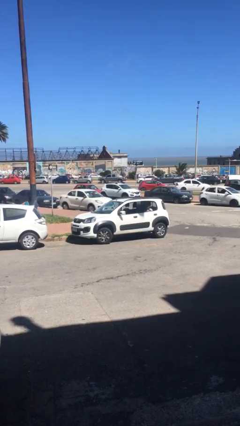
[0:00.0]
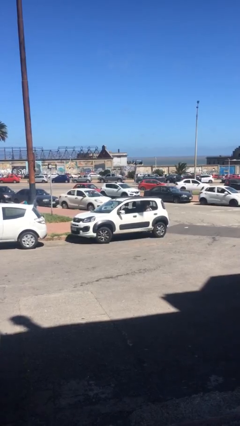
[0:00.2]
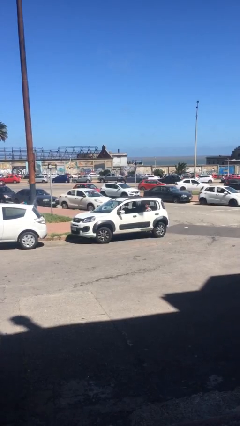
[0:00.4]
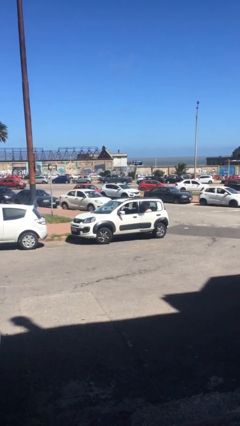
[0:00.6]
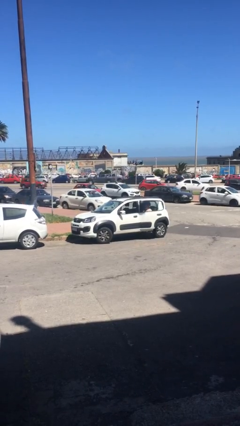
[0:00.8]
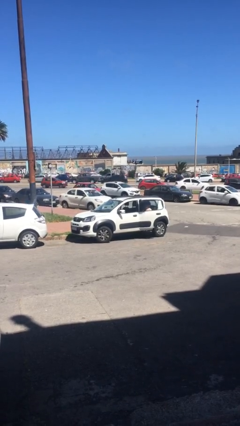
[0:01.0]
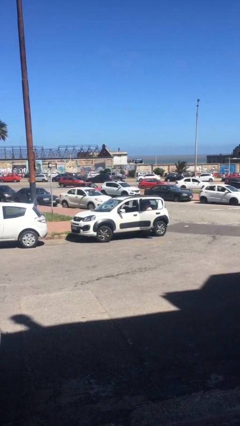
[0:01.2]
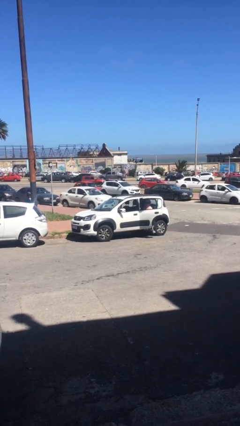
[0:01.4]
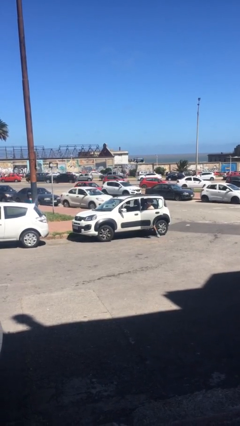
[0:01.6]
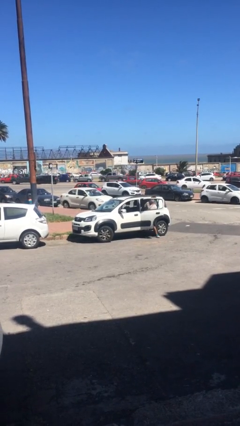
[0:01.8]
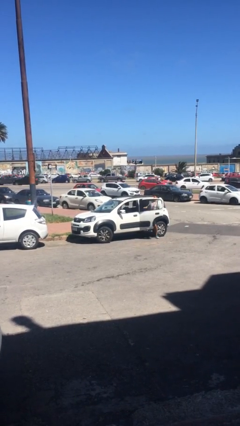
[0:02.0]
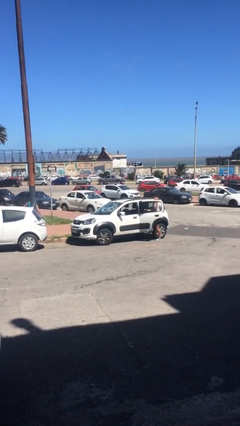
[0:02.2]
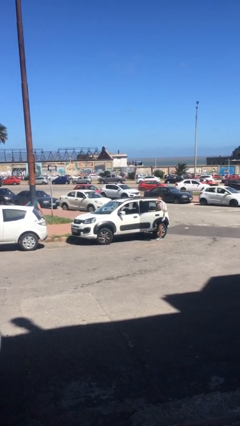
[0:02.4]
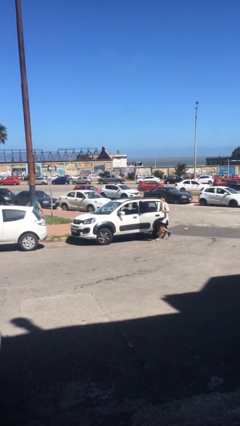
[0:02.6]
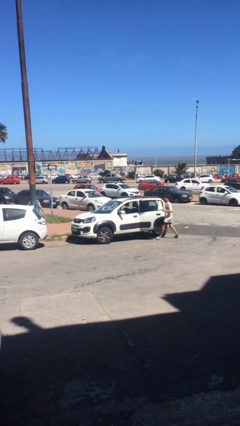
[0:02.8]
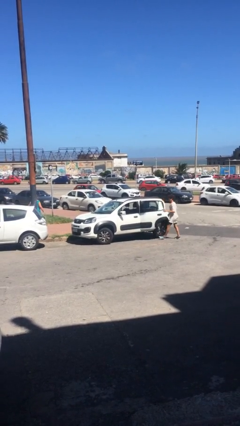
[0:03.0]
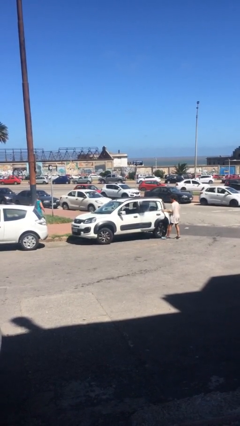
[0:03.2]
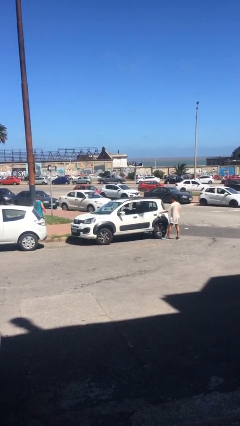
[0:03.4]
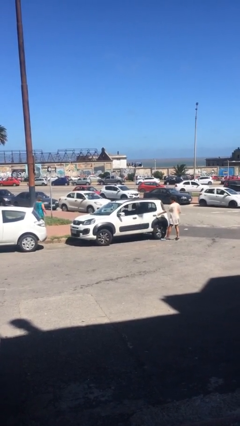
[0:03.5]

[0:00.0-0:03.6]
car drops off person

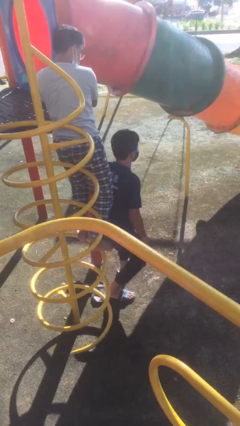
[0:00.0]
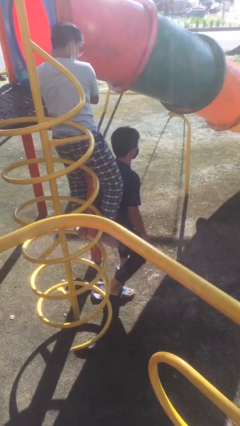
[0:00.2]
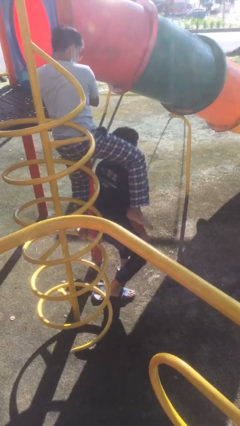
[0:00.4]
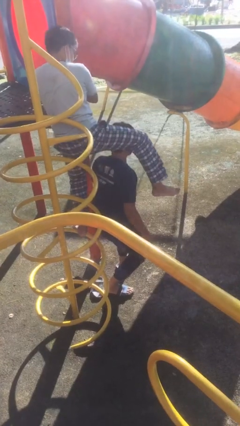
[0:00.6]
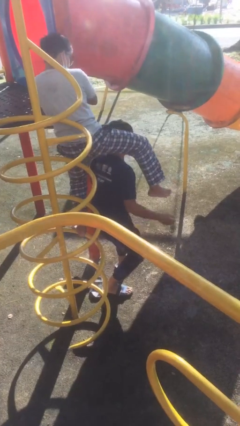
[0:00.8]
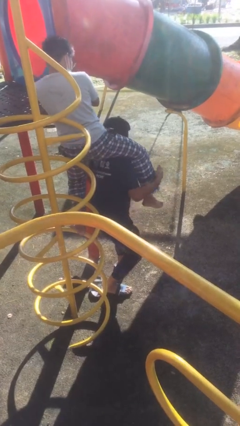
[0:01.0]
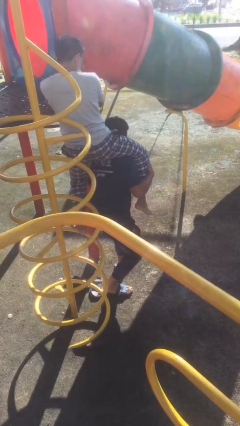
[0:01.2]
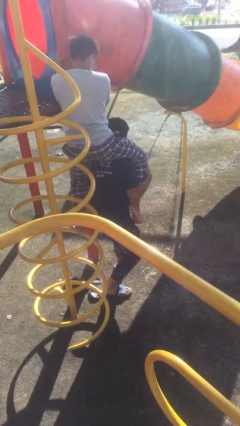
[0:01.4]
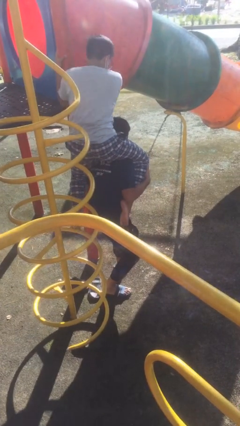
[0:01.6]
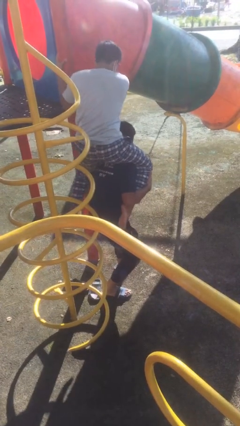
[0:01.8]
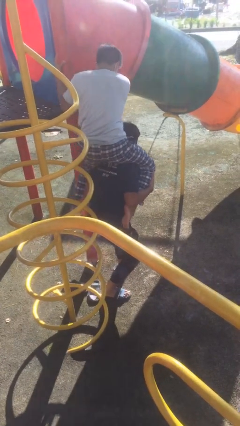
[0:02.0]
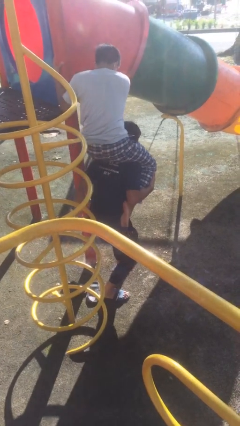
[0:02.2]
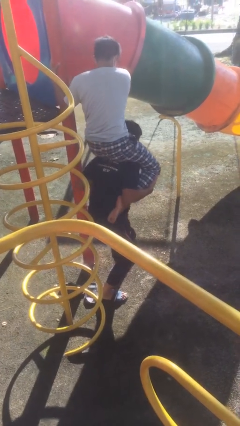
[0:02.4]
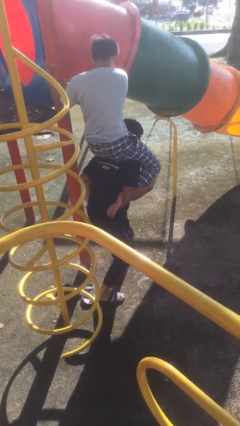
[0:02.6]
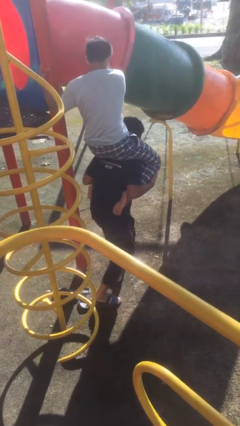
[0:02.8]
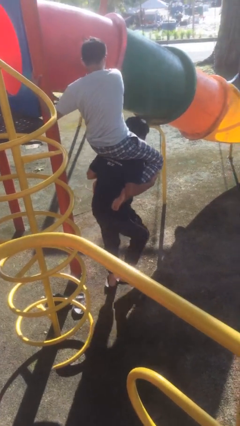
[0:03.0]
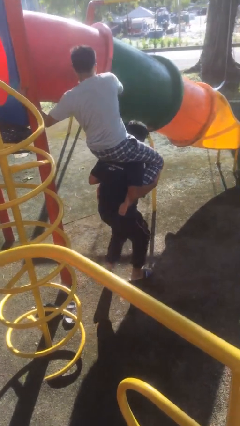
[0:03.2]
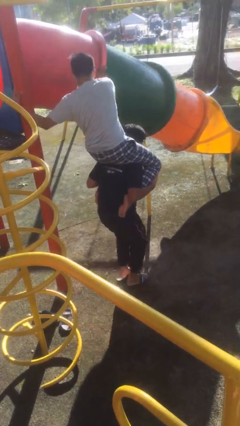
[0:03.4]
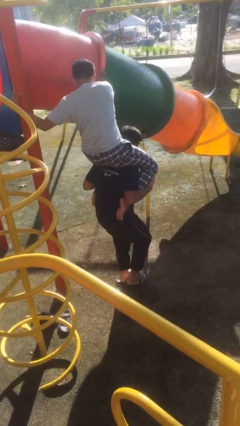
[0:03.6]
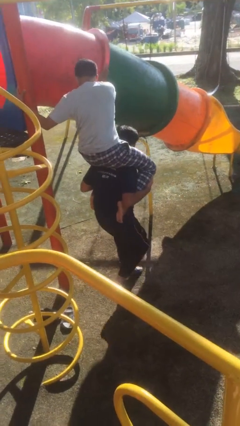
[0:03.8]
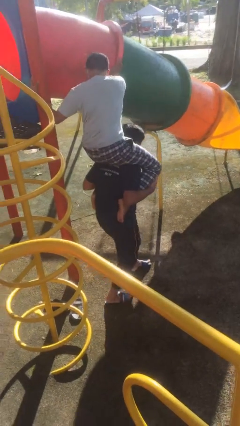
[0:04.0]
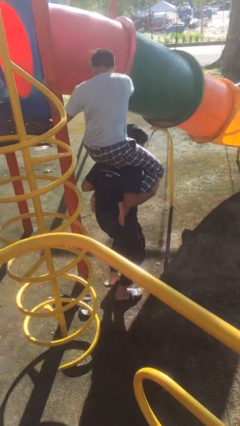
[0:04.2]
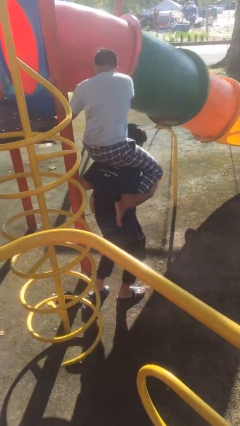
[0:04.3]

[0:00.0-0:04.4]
person carries person on shoulders

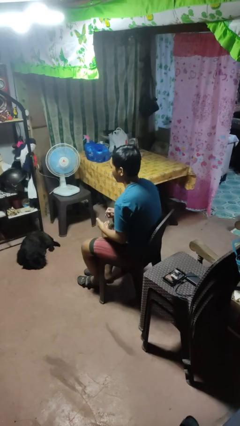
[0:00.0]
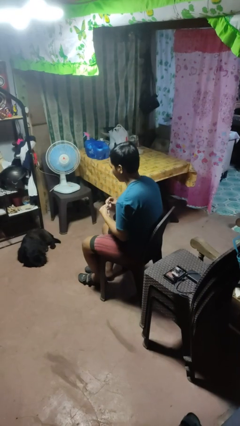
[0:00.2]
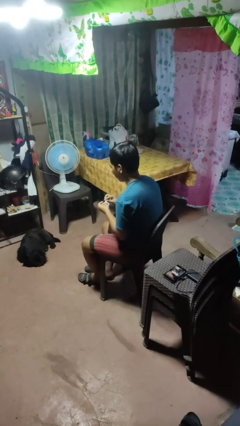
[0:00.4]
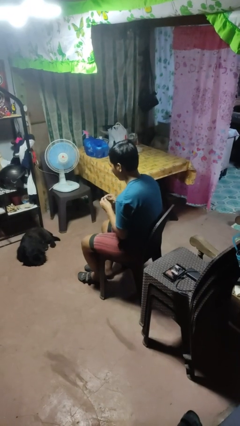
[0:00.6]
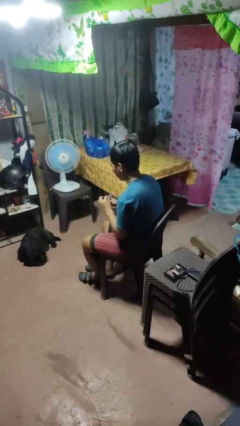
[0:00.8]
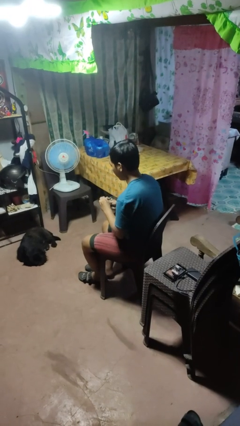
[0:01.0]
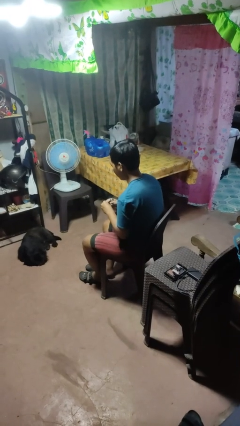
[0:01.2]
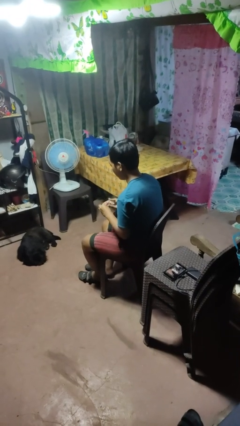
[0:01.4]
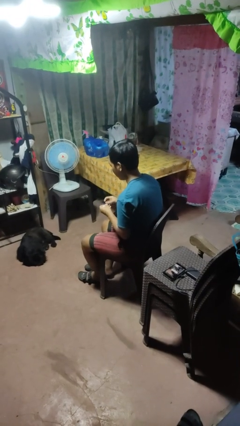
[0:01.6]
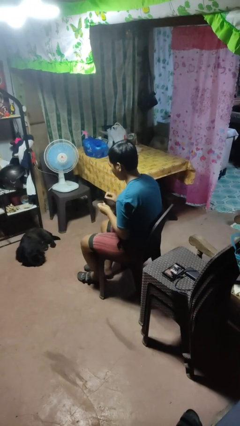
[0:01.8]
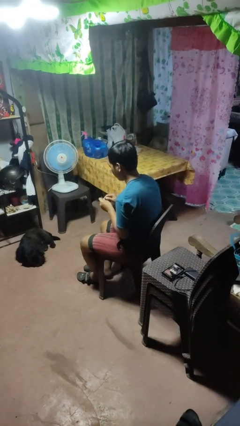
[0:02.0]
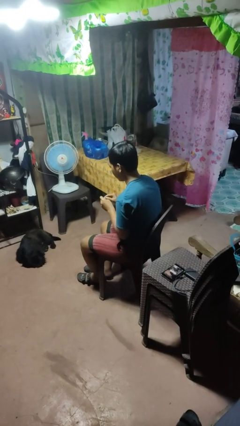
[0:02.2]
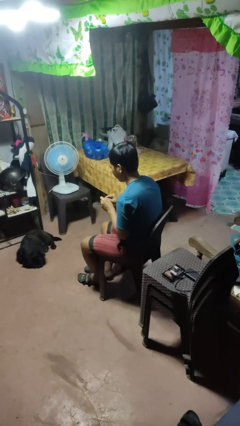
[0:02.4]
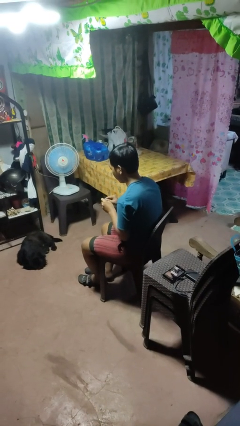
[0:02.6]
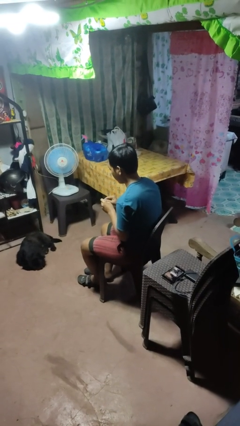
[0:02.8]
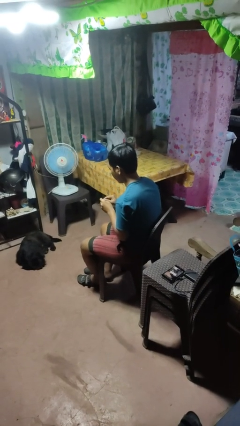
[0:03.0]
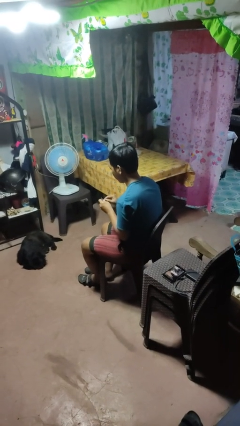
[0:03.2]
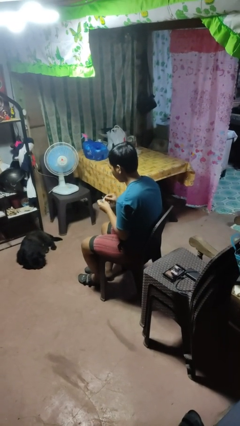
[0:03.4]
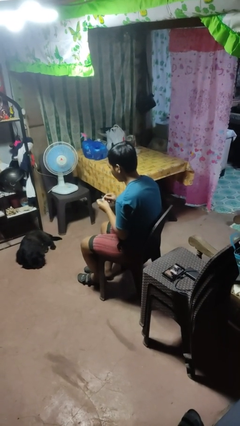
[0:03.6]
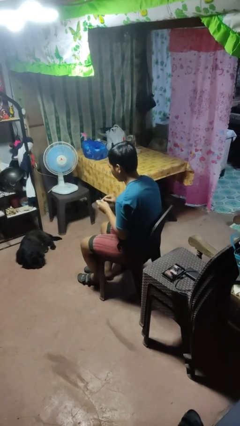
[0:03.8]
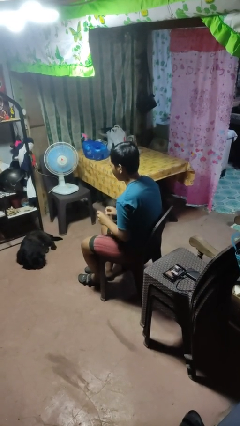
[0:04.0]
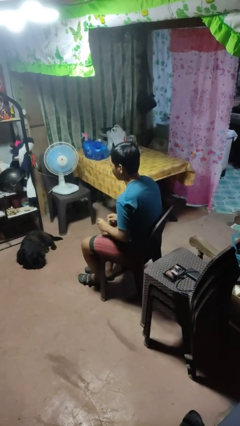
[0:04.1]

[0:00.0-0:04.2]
person files fingernails

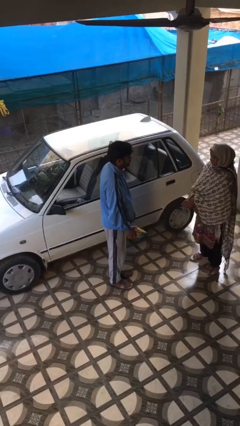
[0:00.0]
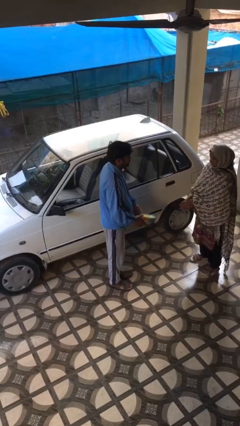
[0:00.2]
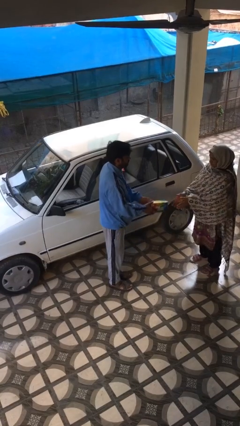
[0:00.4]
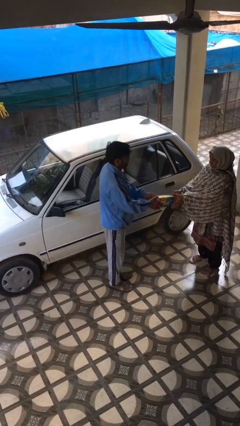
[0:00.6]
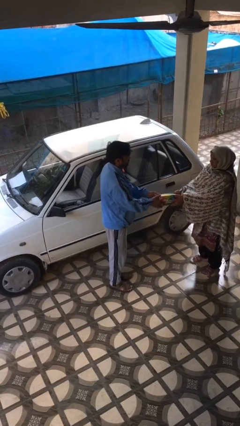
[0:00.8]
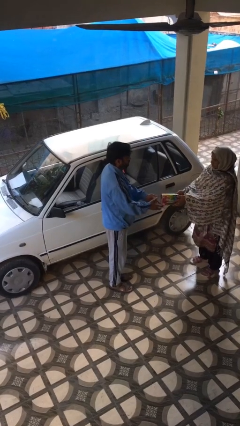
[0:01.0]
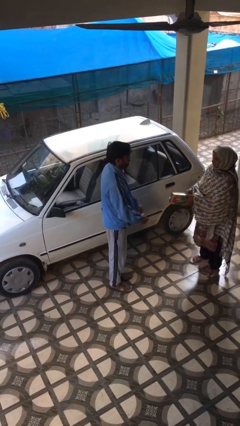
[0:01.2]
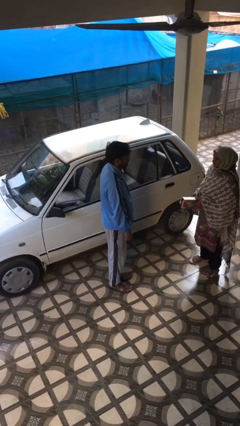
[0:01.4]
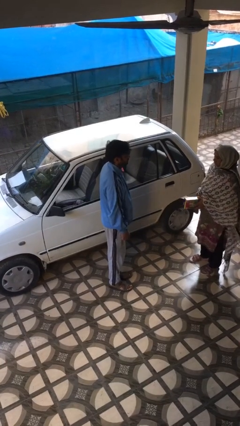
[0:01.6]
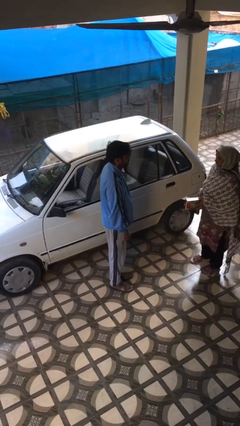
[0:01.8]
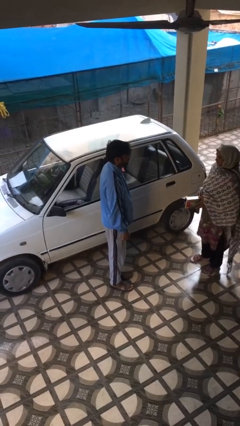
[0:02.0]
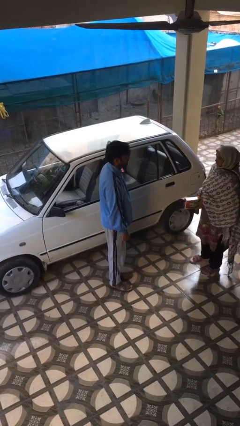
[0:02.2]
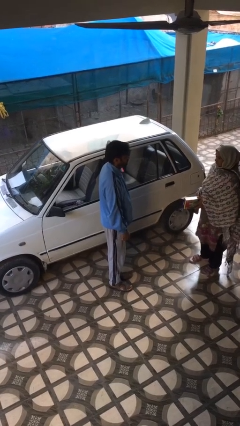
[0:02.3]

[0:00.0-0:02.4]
person transfers object to person

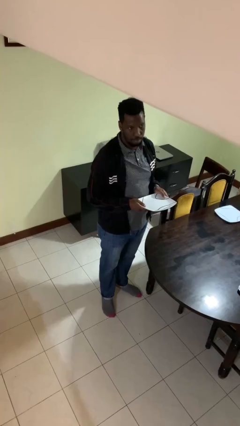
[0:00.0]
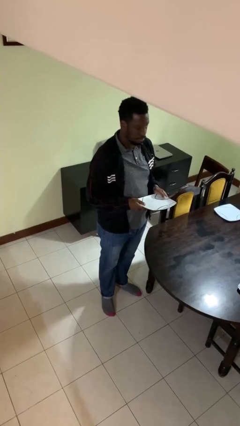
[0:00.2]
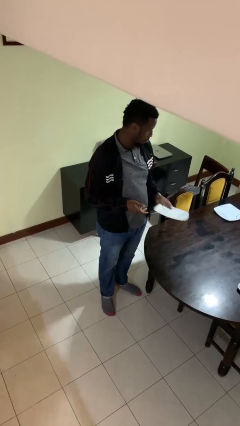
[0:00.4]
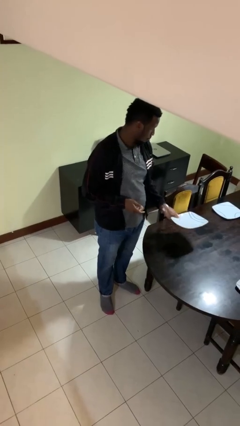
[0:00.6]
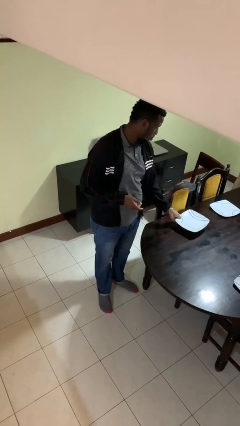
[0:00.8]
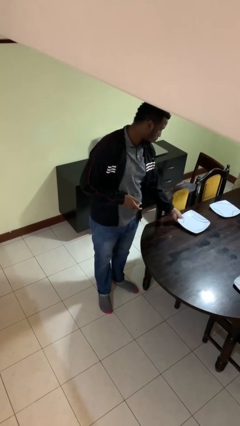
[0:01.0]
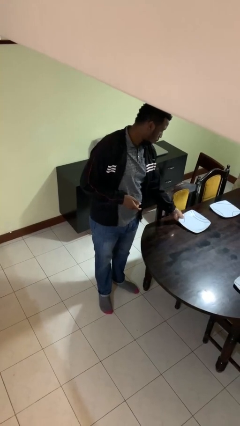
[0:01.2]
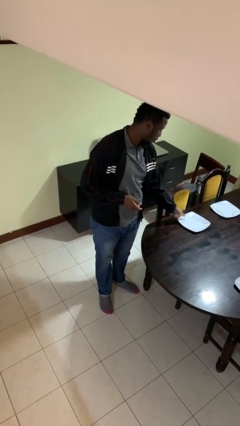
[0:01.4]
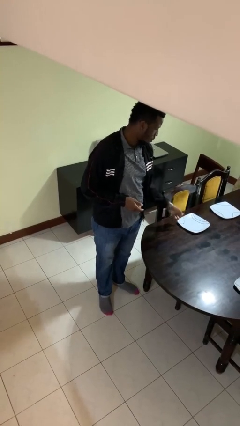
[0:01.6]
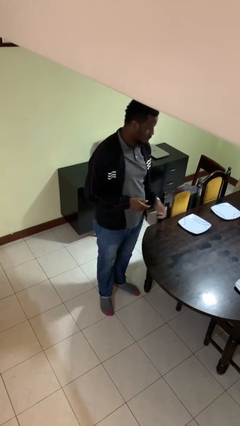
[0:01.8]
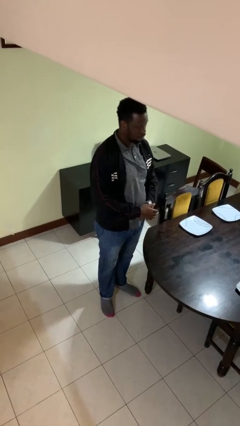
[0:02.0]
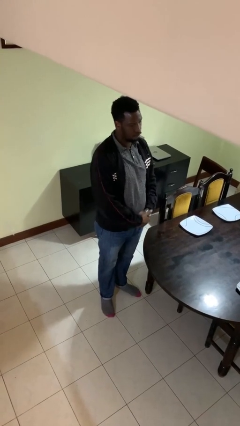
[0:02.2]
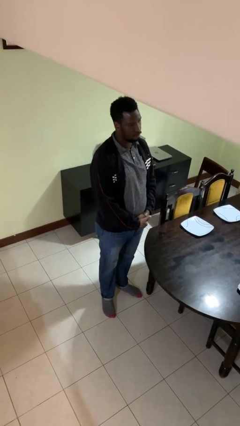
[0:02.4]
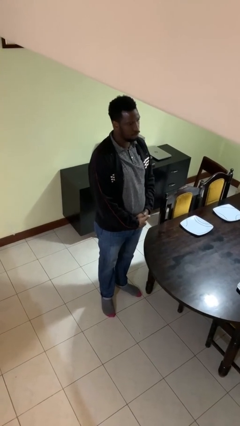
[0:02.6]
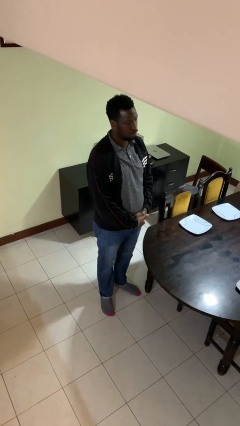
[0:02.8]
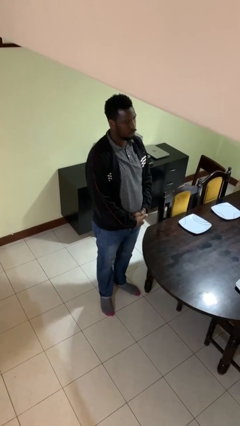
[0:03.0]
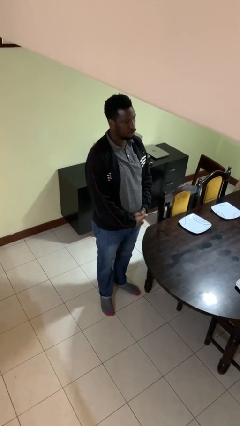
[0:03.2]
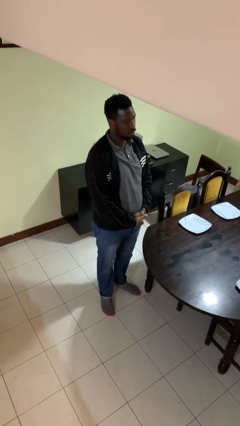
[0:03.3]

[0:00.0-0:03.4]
person sets table
